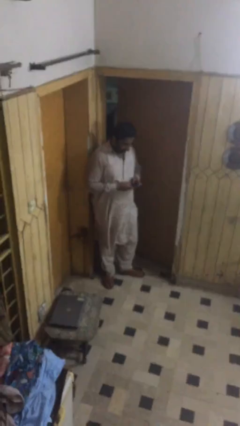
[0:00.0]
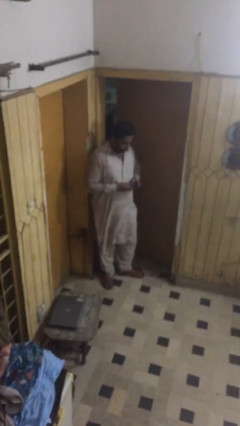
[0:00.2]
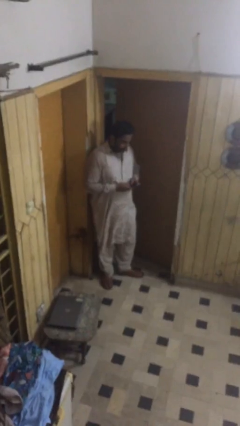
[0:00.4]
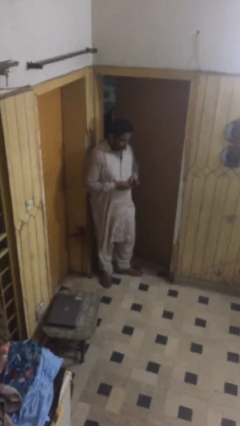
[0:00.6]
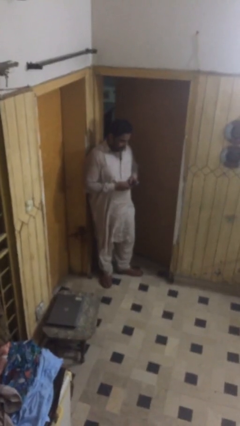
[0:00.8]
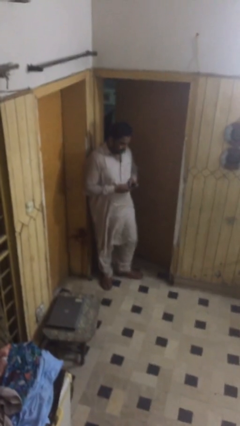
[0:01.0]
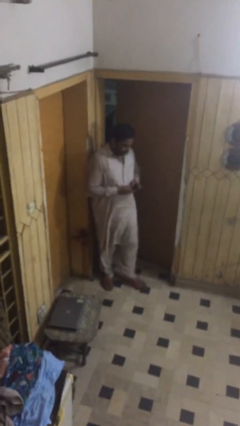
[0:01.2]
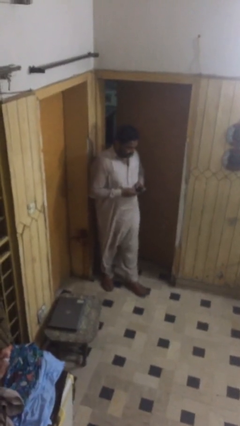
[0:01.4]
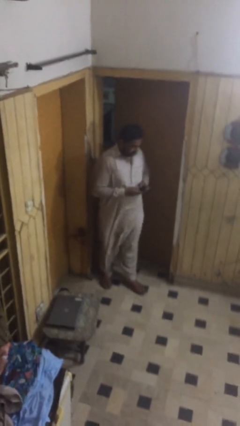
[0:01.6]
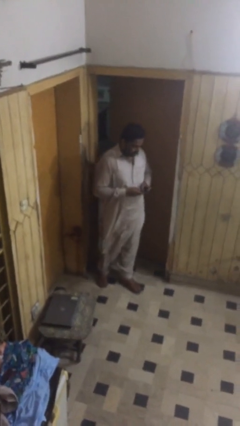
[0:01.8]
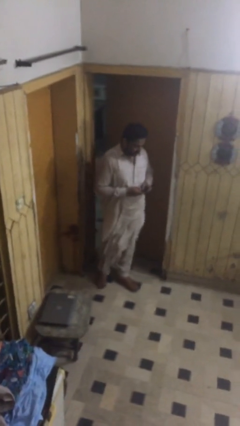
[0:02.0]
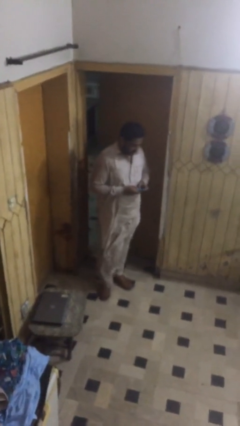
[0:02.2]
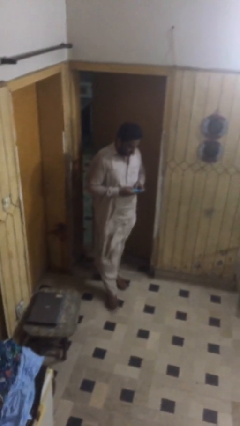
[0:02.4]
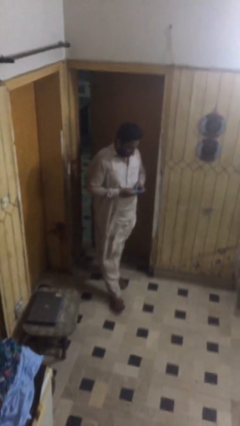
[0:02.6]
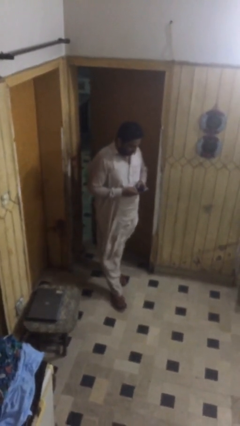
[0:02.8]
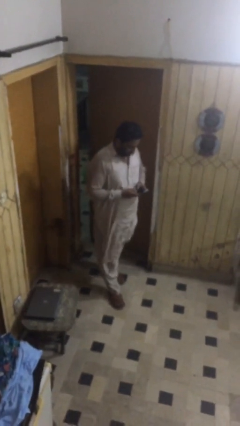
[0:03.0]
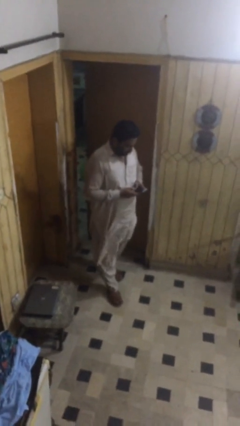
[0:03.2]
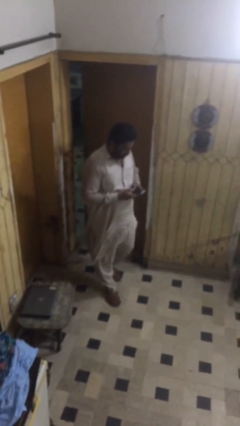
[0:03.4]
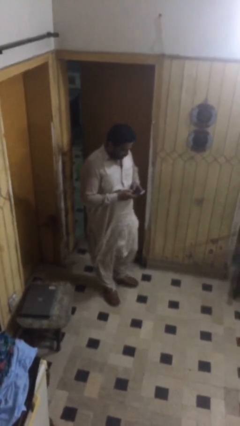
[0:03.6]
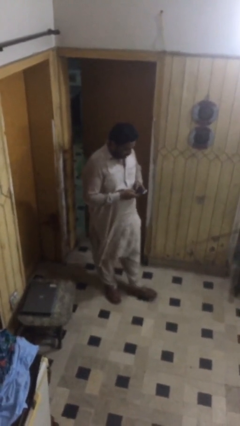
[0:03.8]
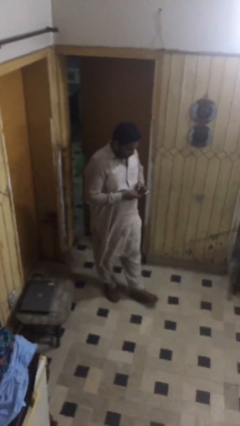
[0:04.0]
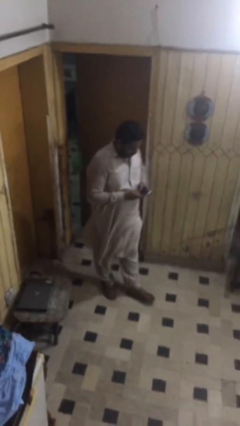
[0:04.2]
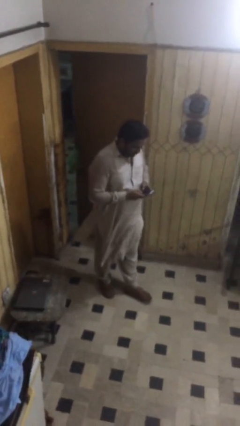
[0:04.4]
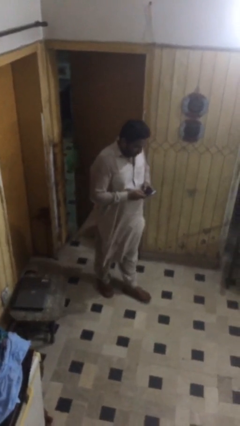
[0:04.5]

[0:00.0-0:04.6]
person texts on phone

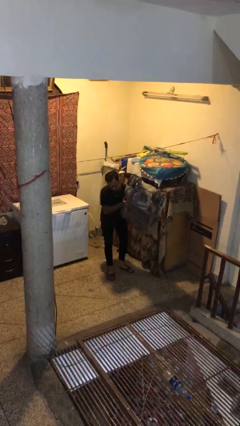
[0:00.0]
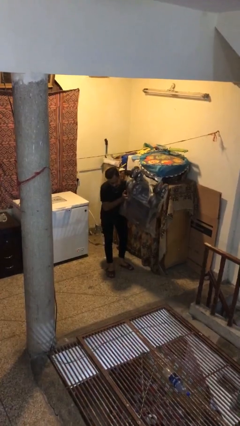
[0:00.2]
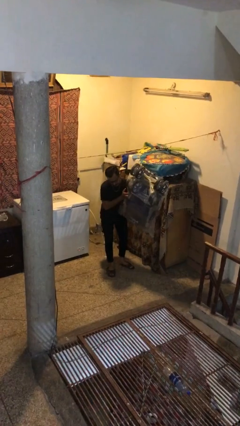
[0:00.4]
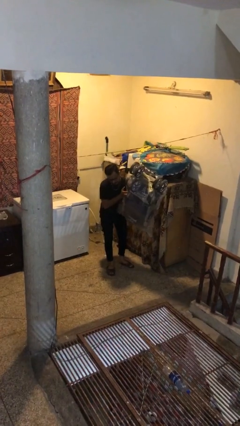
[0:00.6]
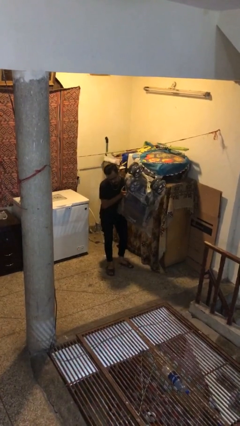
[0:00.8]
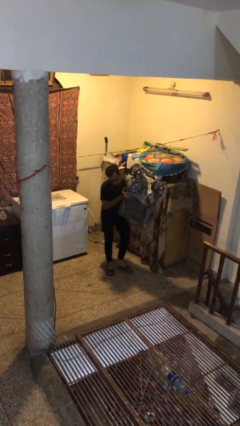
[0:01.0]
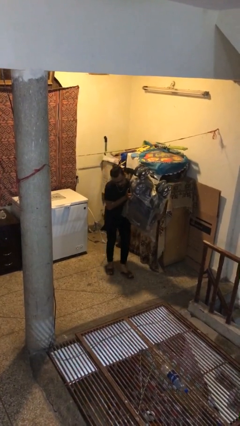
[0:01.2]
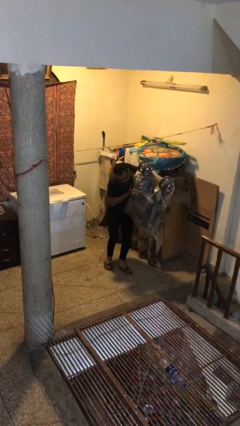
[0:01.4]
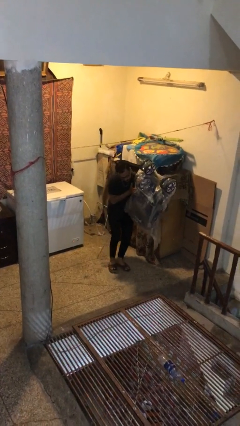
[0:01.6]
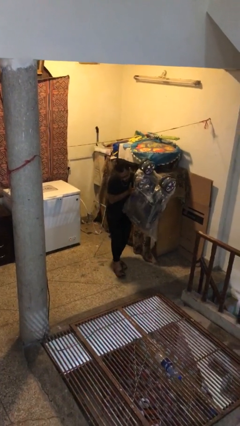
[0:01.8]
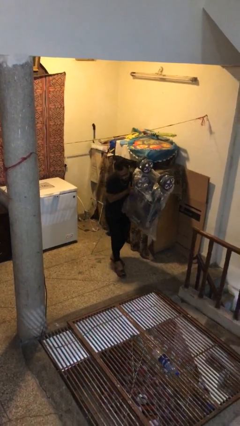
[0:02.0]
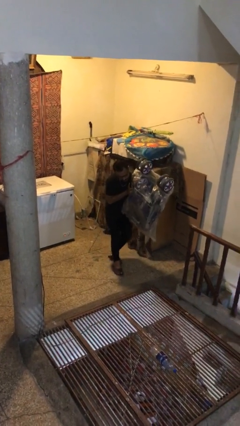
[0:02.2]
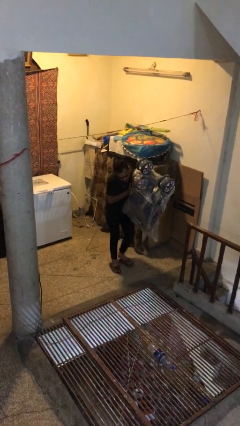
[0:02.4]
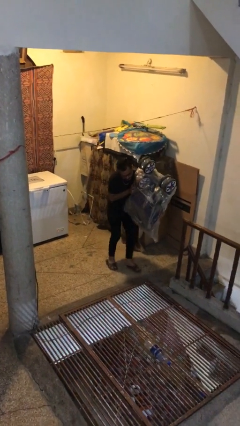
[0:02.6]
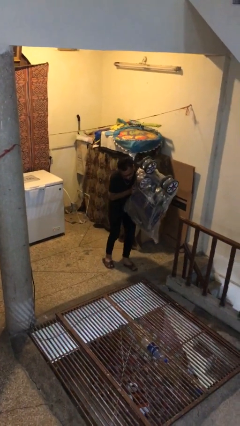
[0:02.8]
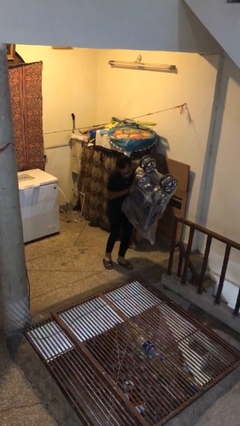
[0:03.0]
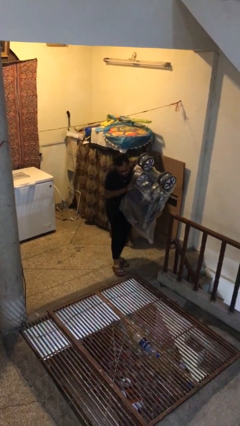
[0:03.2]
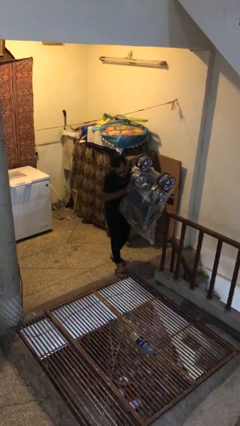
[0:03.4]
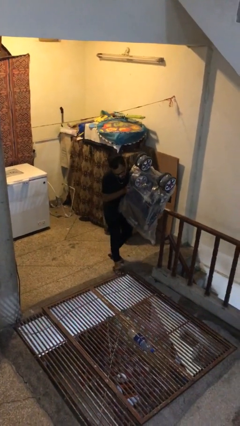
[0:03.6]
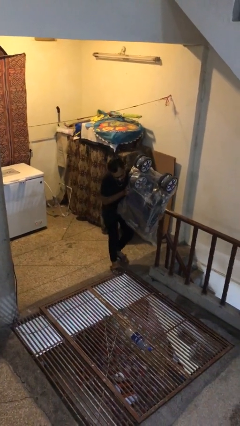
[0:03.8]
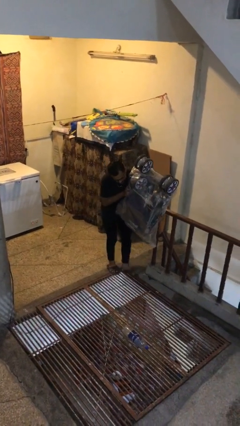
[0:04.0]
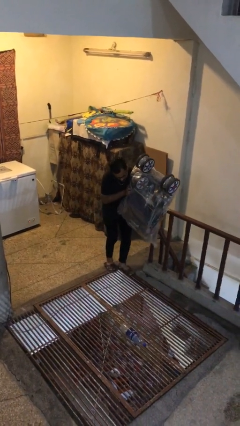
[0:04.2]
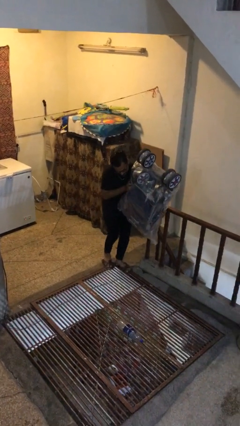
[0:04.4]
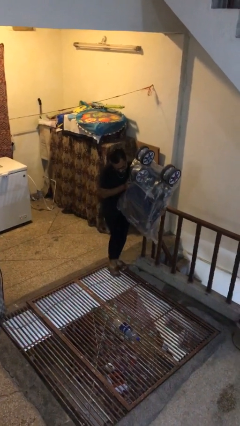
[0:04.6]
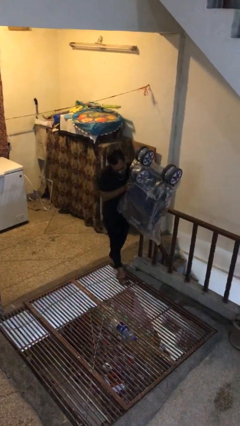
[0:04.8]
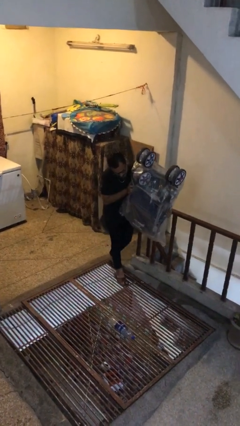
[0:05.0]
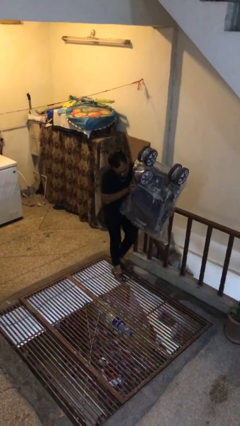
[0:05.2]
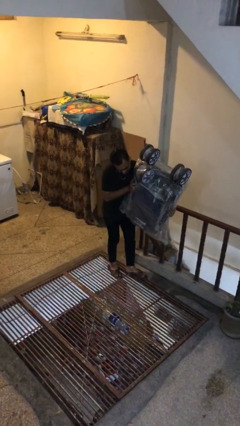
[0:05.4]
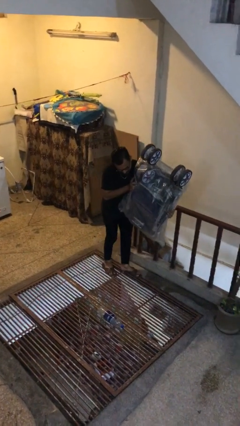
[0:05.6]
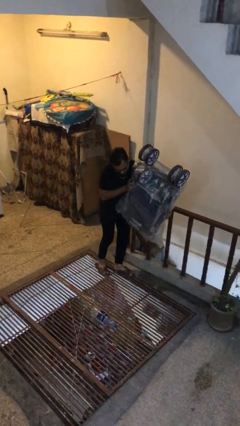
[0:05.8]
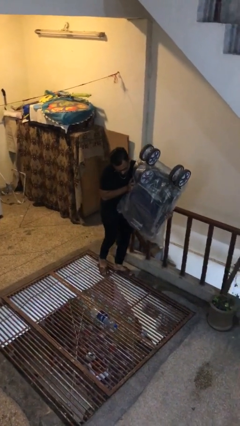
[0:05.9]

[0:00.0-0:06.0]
person carries heavy object

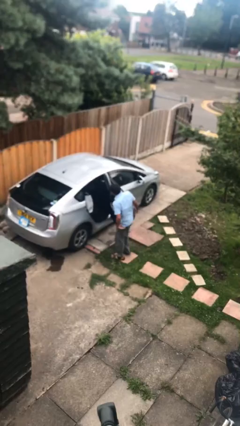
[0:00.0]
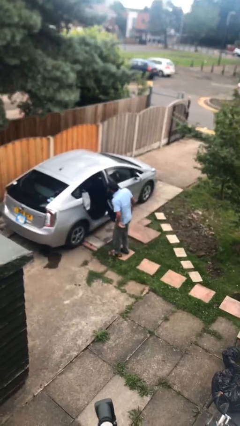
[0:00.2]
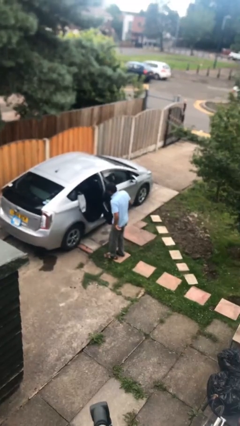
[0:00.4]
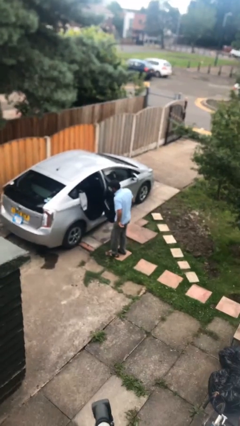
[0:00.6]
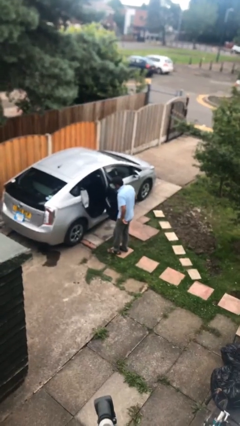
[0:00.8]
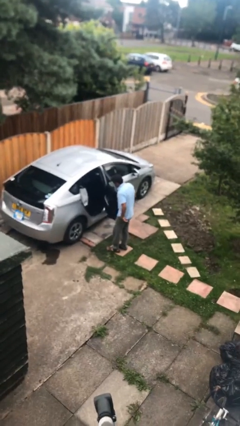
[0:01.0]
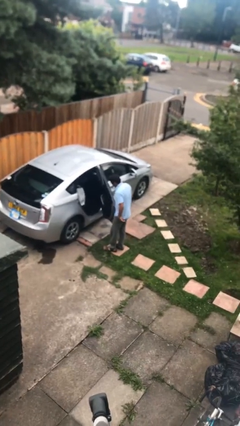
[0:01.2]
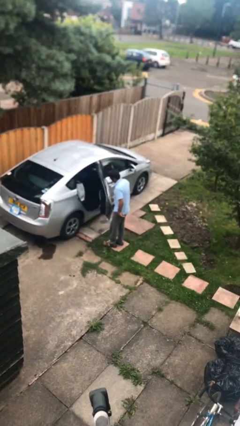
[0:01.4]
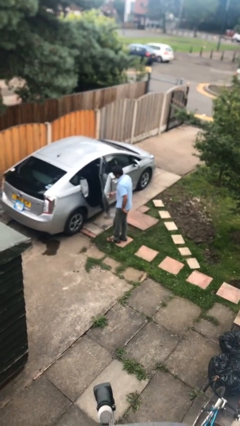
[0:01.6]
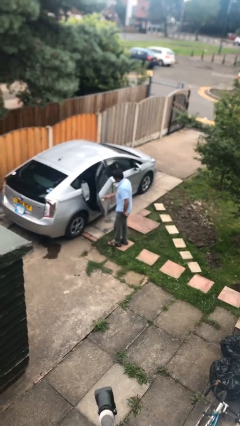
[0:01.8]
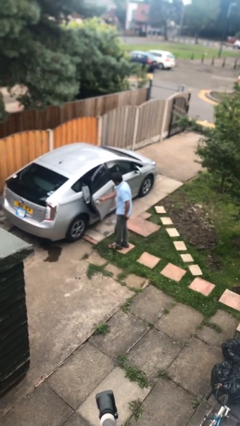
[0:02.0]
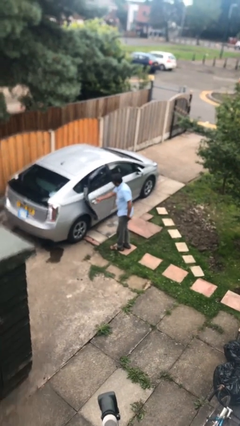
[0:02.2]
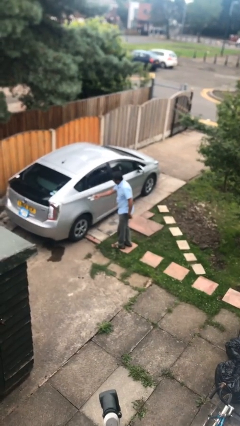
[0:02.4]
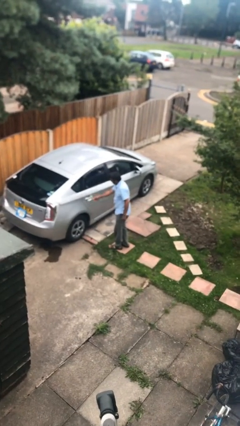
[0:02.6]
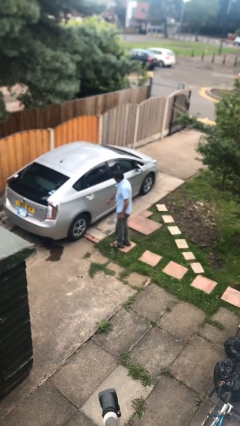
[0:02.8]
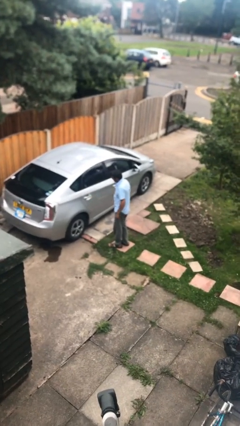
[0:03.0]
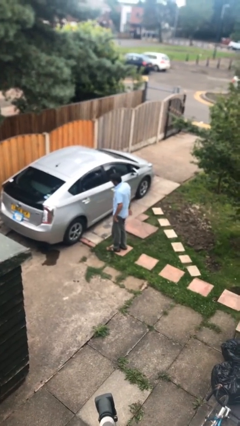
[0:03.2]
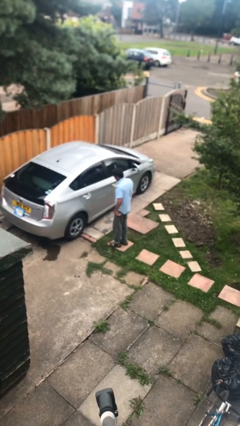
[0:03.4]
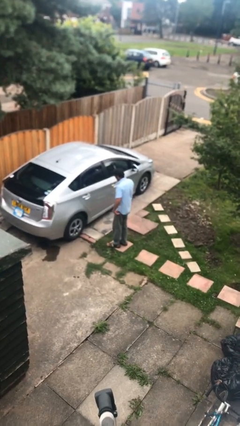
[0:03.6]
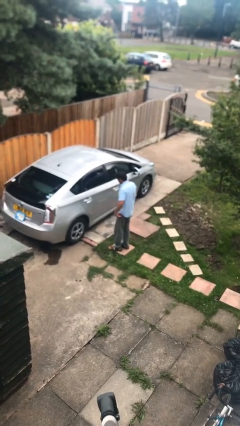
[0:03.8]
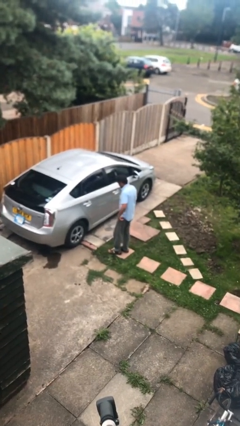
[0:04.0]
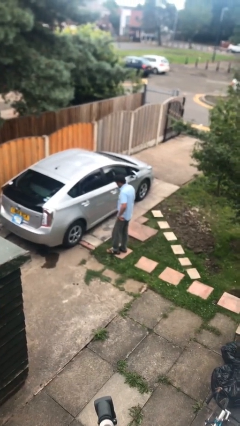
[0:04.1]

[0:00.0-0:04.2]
person closes car door

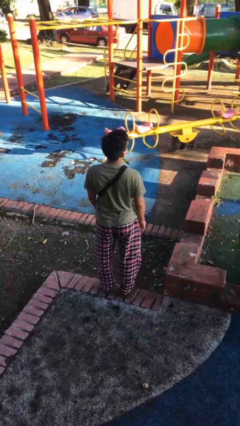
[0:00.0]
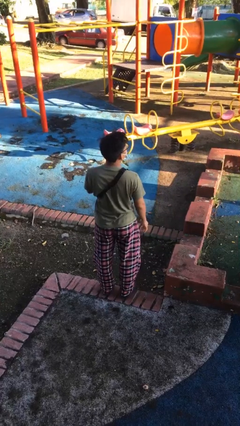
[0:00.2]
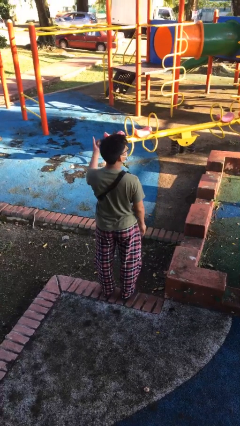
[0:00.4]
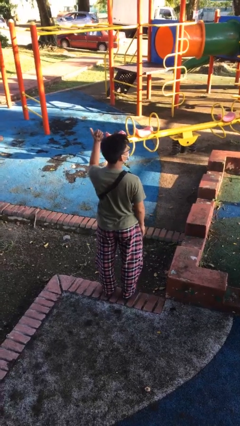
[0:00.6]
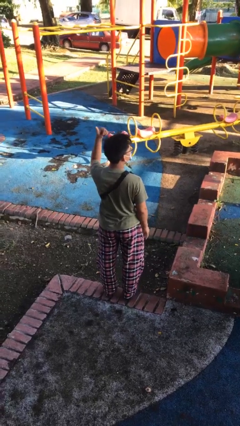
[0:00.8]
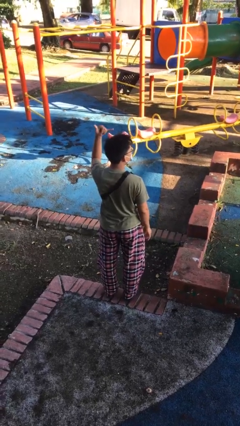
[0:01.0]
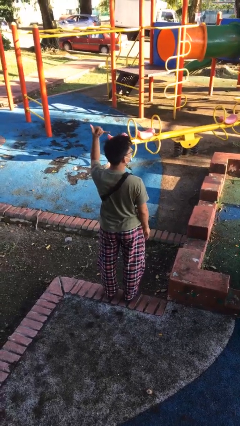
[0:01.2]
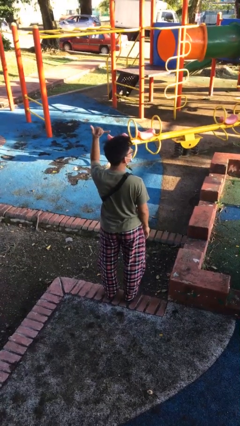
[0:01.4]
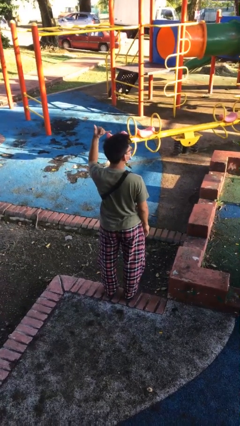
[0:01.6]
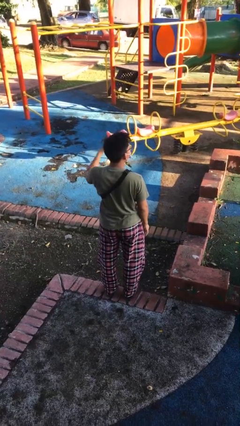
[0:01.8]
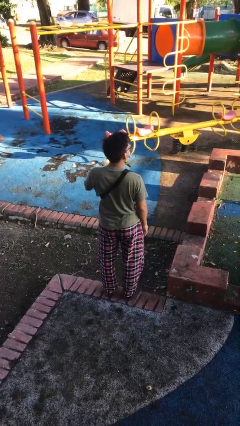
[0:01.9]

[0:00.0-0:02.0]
person gestures hang loose

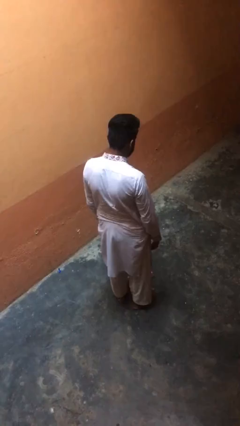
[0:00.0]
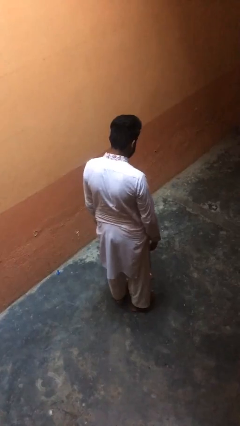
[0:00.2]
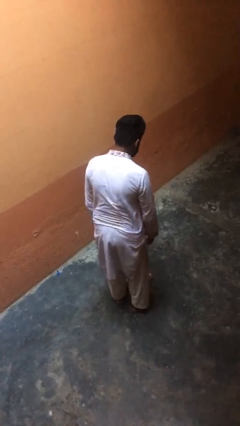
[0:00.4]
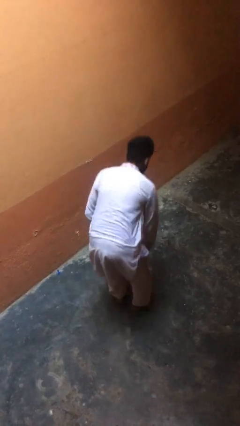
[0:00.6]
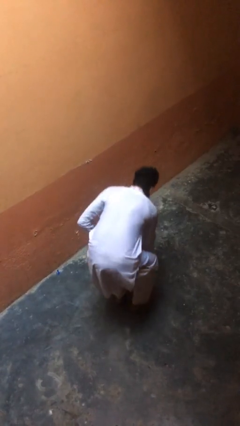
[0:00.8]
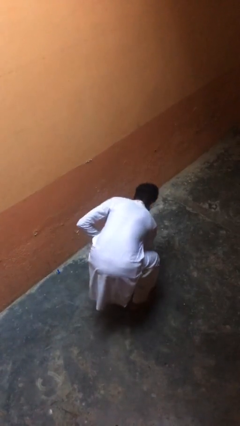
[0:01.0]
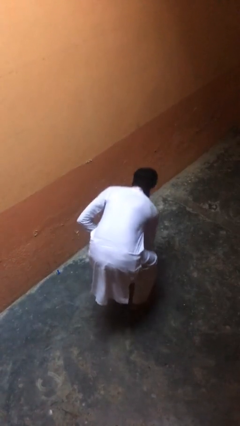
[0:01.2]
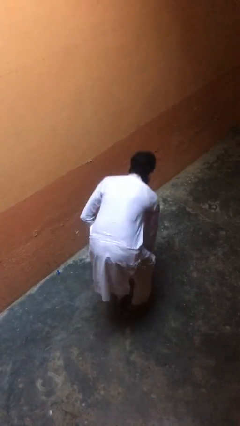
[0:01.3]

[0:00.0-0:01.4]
person picks up object from floor
